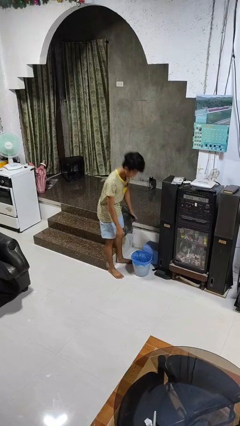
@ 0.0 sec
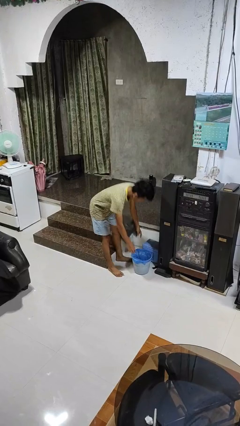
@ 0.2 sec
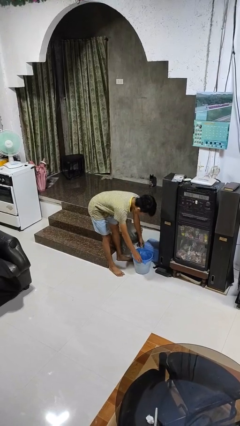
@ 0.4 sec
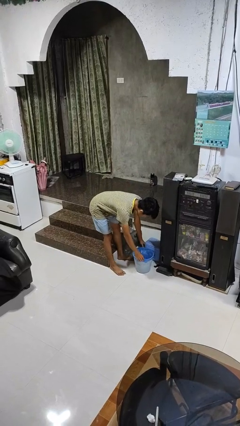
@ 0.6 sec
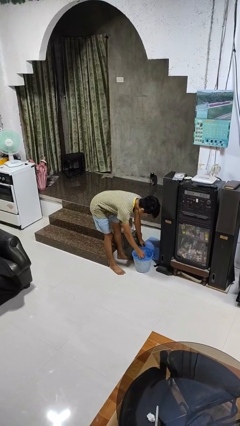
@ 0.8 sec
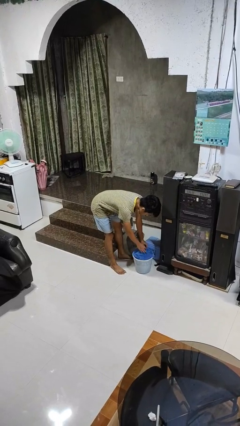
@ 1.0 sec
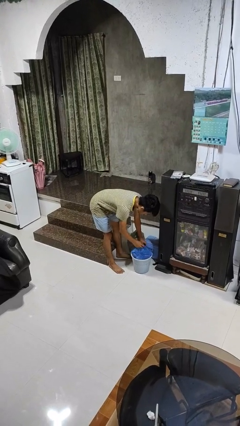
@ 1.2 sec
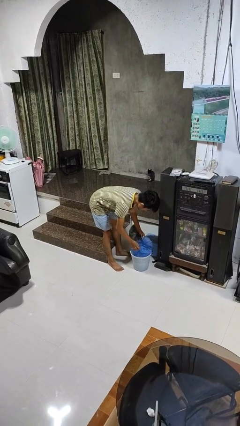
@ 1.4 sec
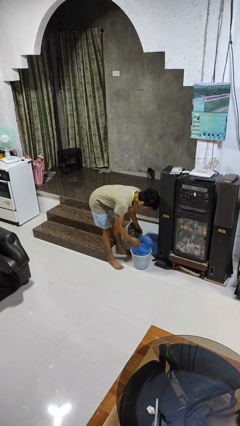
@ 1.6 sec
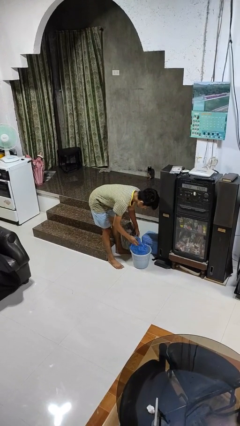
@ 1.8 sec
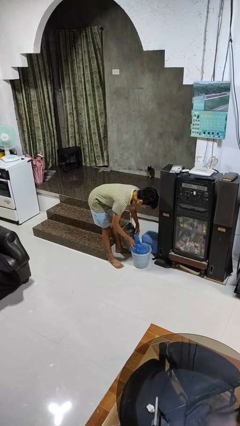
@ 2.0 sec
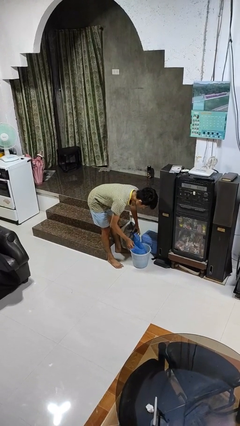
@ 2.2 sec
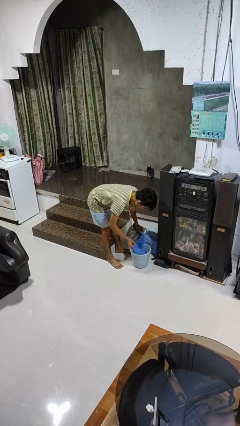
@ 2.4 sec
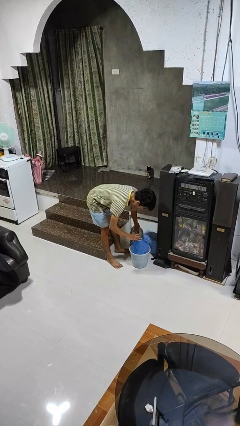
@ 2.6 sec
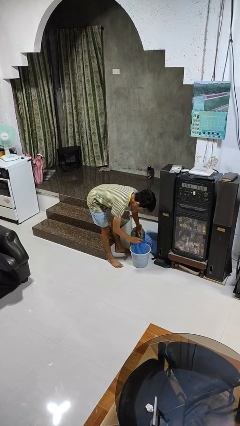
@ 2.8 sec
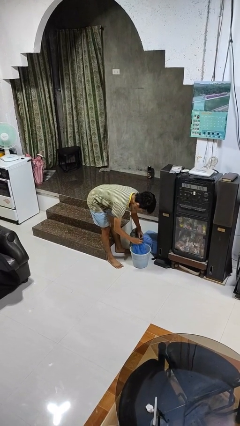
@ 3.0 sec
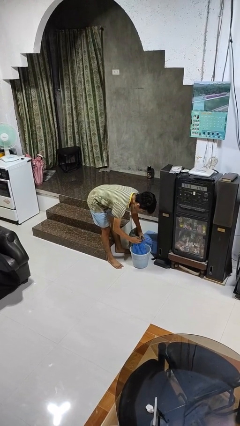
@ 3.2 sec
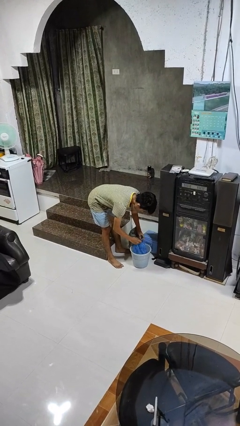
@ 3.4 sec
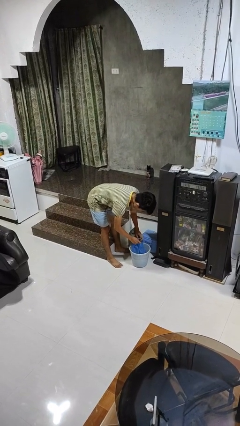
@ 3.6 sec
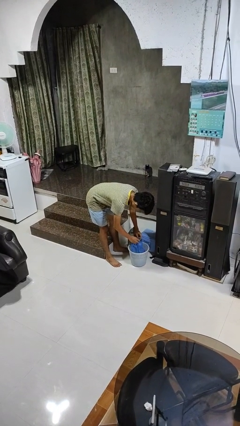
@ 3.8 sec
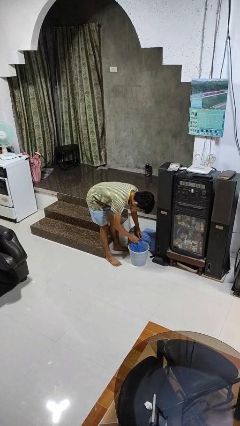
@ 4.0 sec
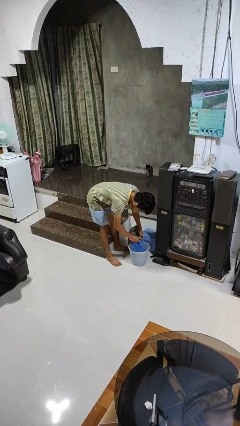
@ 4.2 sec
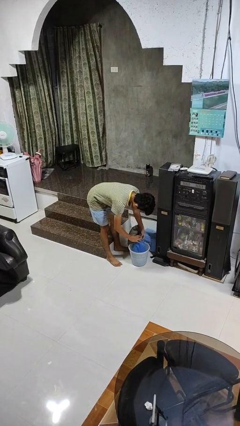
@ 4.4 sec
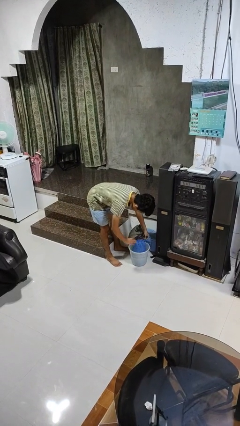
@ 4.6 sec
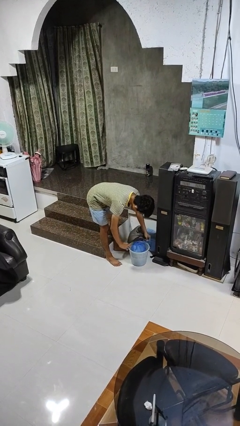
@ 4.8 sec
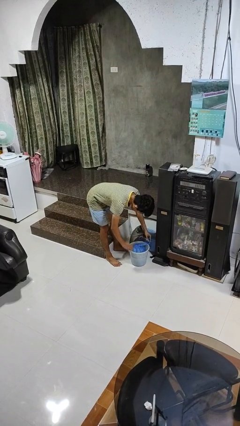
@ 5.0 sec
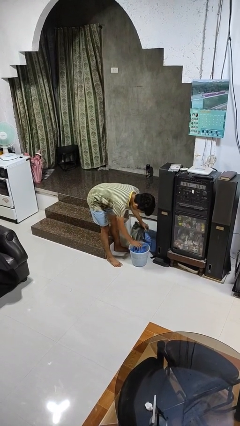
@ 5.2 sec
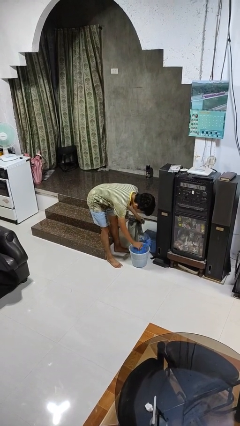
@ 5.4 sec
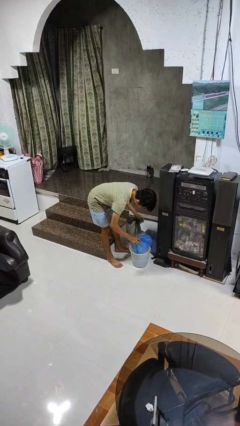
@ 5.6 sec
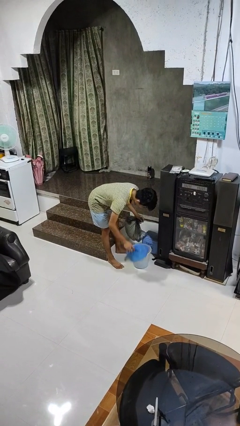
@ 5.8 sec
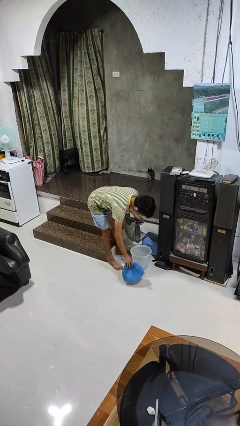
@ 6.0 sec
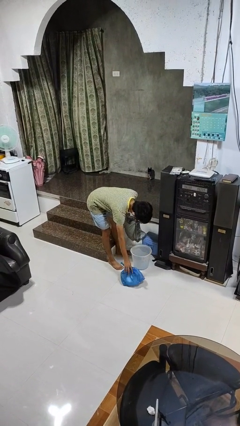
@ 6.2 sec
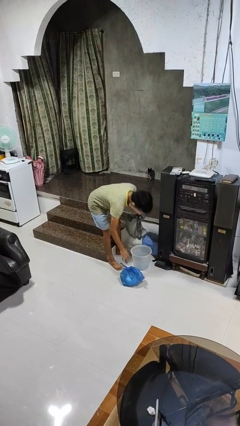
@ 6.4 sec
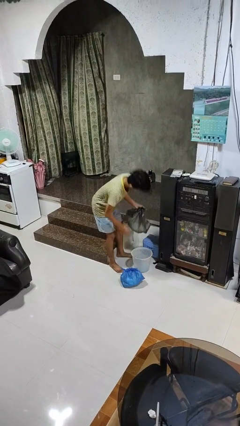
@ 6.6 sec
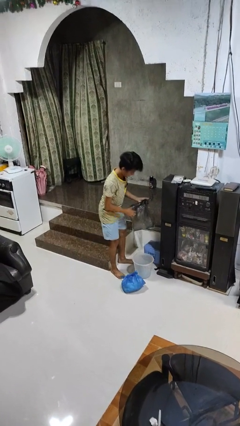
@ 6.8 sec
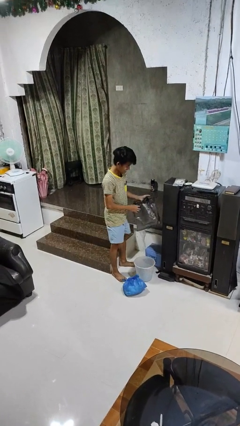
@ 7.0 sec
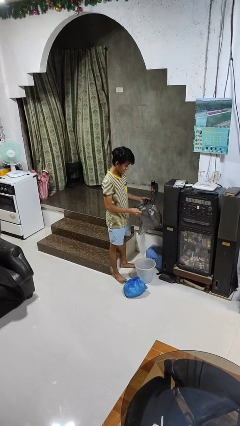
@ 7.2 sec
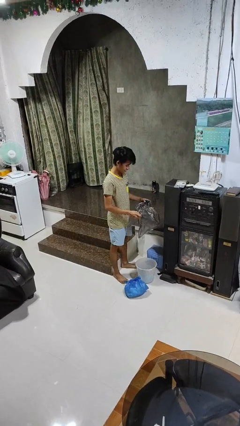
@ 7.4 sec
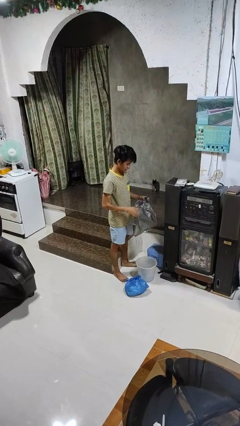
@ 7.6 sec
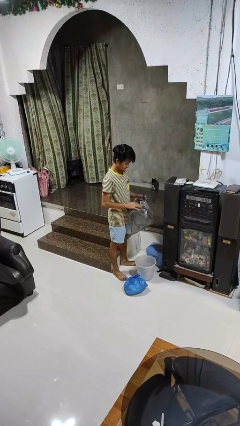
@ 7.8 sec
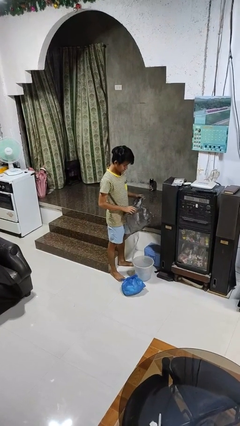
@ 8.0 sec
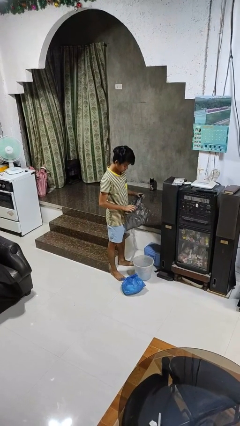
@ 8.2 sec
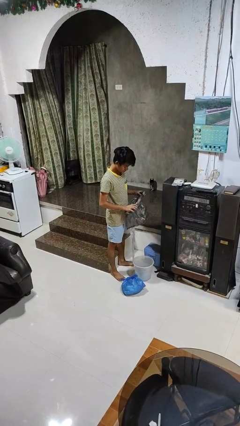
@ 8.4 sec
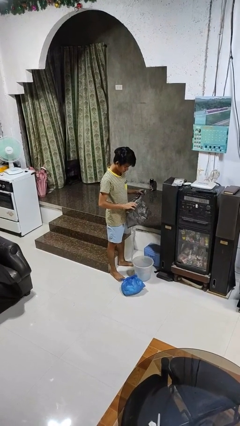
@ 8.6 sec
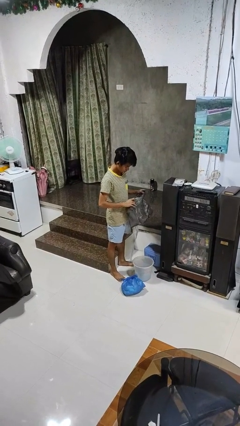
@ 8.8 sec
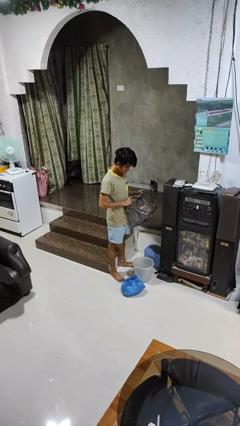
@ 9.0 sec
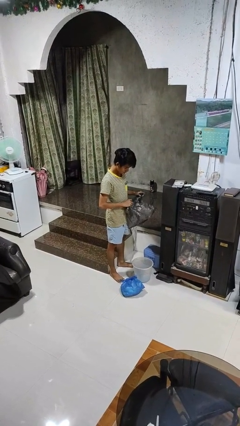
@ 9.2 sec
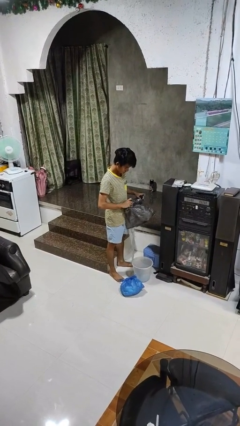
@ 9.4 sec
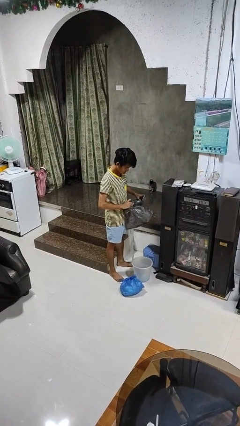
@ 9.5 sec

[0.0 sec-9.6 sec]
person removes trashbag from trashcan

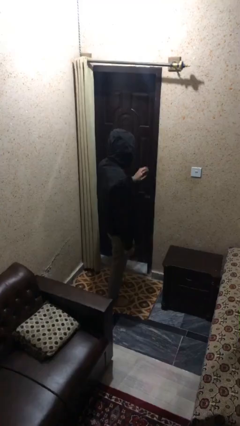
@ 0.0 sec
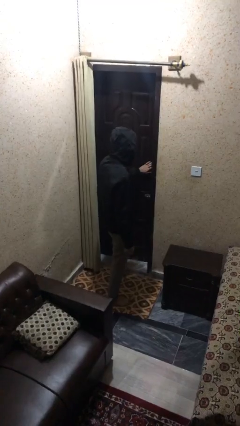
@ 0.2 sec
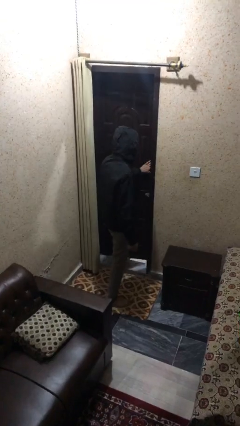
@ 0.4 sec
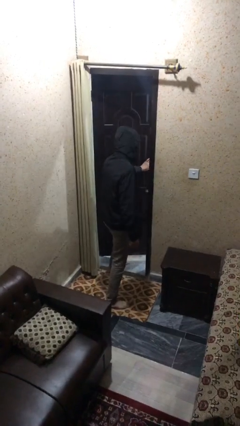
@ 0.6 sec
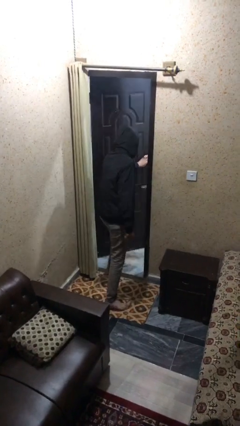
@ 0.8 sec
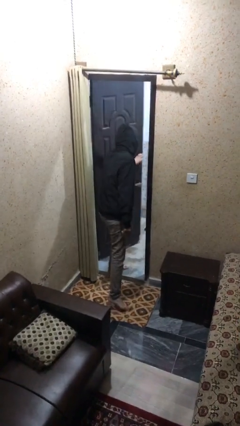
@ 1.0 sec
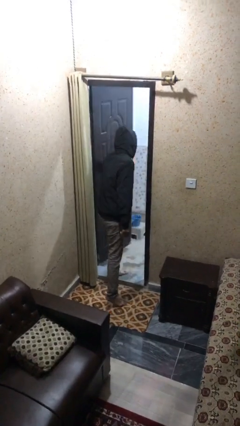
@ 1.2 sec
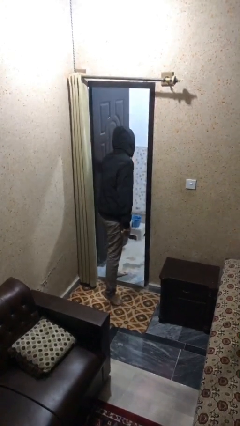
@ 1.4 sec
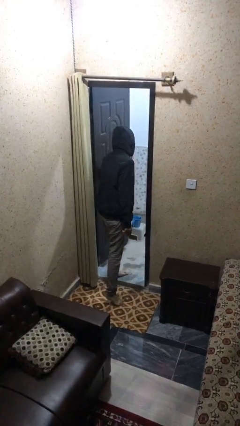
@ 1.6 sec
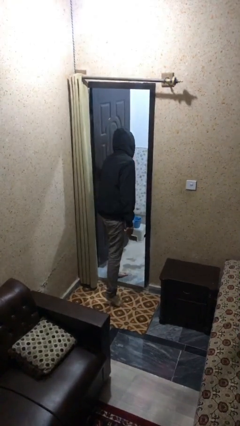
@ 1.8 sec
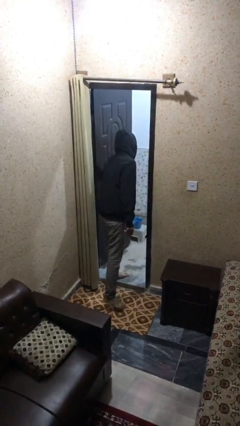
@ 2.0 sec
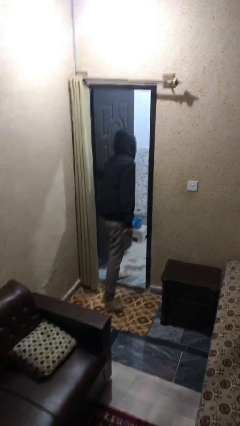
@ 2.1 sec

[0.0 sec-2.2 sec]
person opens facility door

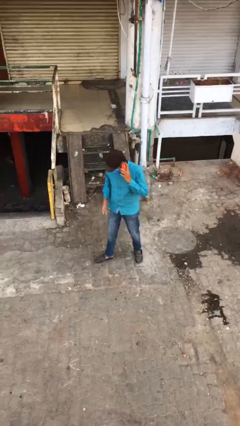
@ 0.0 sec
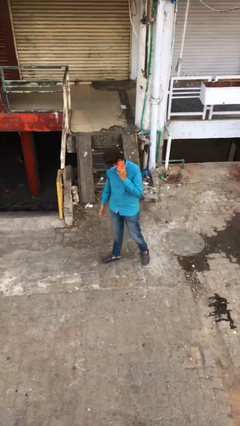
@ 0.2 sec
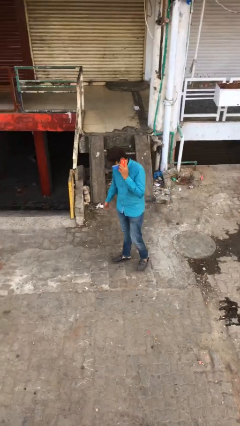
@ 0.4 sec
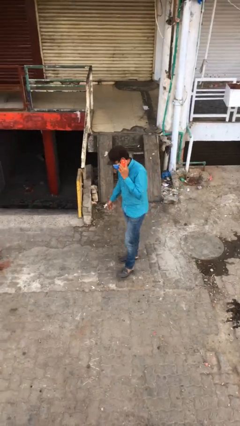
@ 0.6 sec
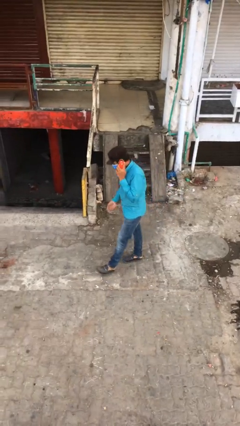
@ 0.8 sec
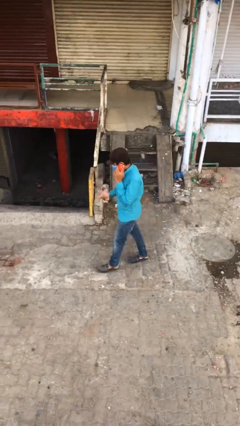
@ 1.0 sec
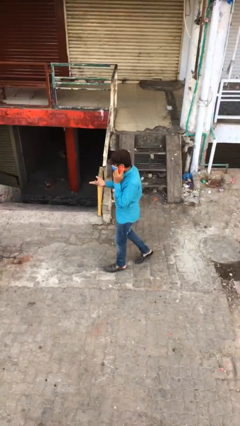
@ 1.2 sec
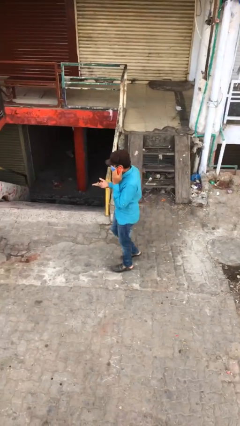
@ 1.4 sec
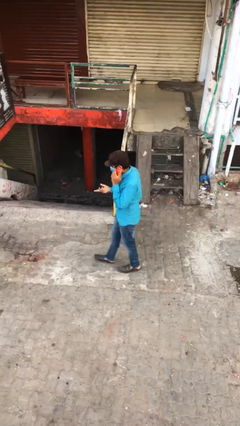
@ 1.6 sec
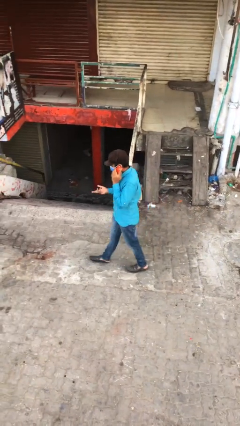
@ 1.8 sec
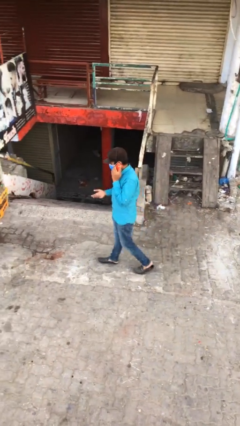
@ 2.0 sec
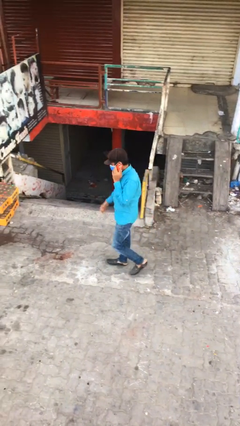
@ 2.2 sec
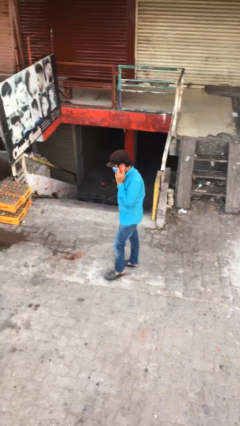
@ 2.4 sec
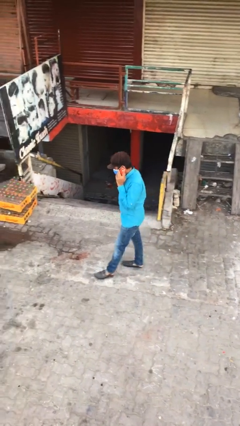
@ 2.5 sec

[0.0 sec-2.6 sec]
person talks on phone

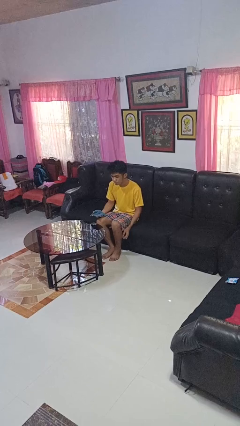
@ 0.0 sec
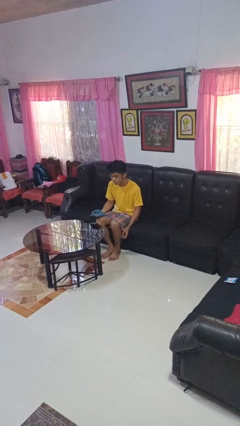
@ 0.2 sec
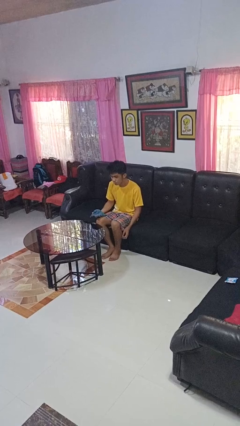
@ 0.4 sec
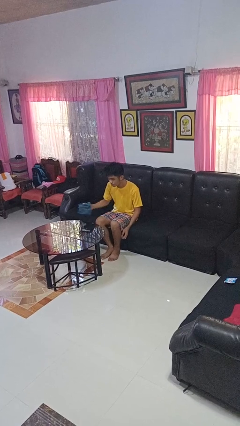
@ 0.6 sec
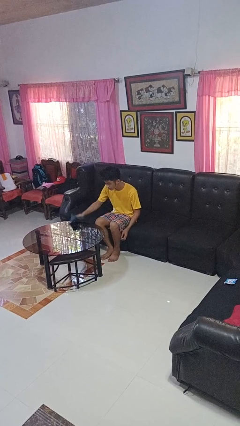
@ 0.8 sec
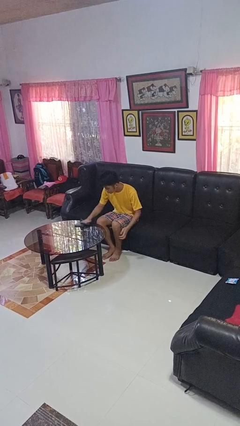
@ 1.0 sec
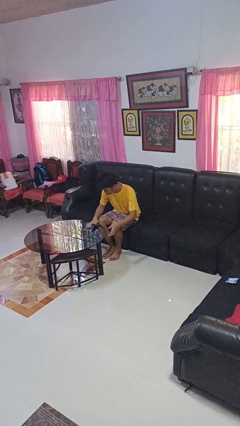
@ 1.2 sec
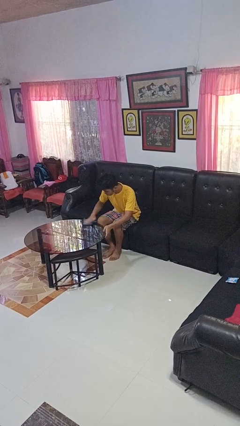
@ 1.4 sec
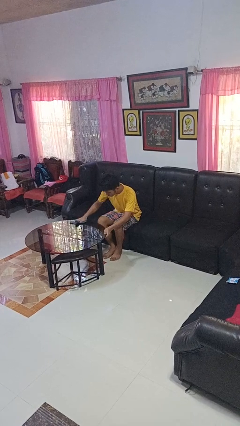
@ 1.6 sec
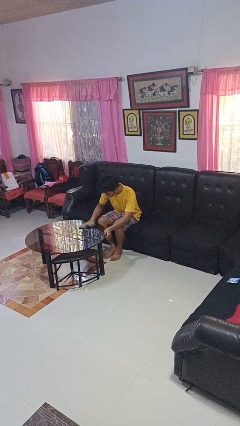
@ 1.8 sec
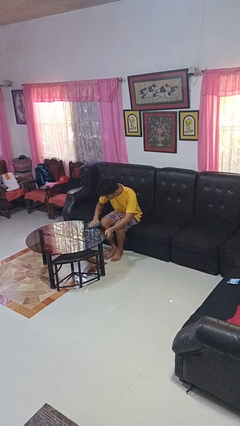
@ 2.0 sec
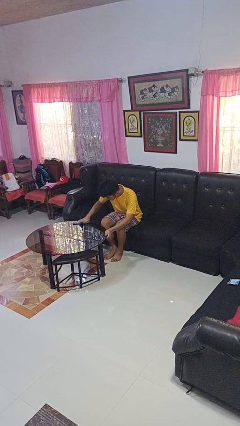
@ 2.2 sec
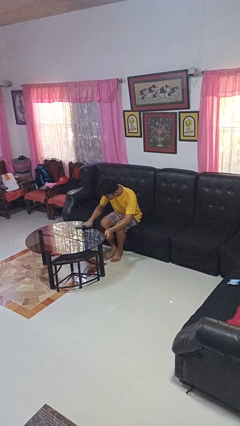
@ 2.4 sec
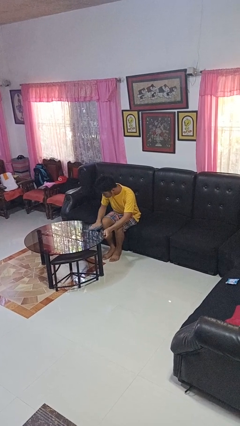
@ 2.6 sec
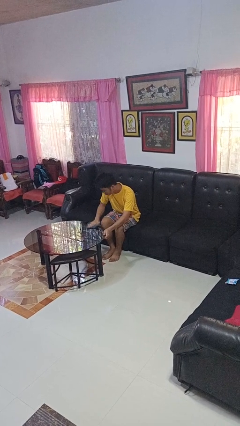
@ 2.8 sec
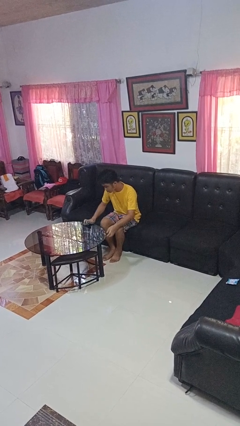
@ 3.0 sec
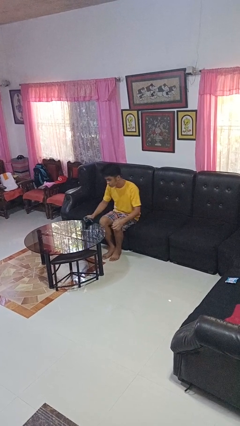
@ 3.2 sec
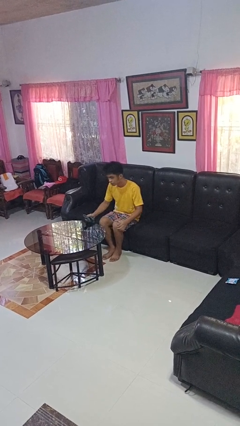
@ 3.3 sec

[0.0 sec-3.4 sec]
person cleans table with rag
